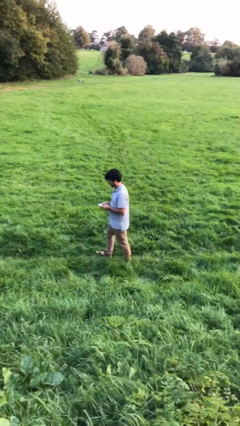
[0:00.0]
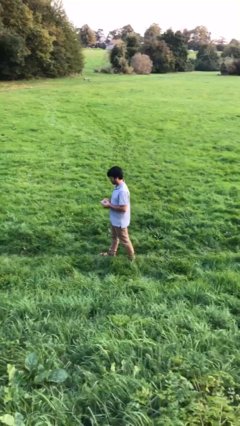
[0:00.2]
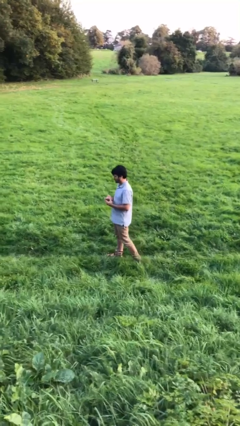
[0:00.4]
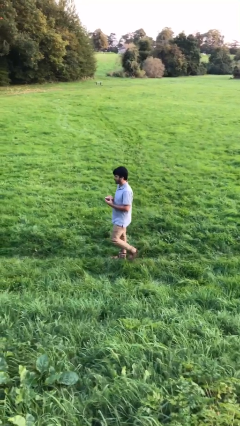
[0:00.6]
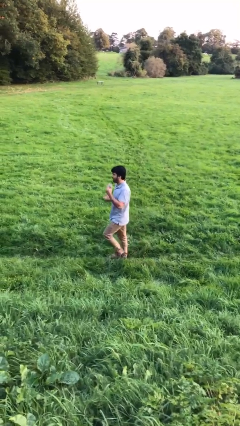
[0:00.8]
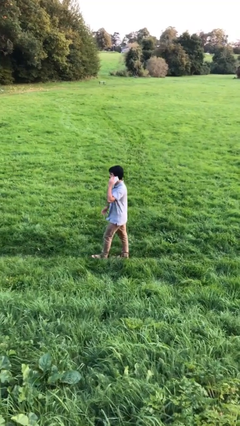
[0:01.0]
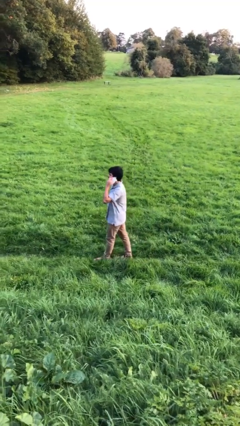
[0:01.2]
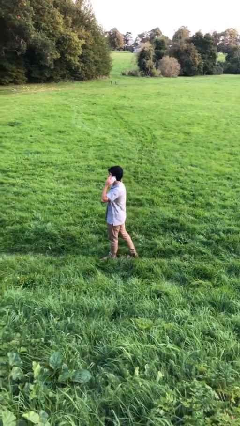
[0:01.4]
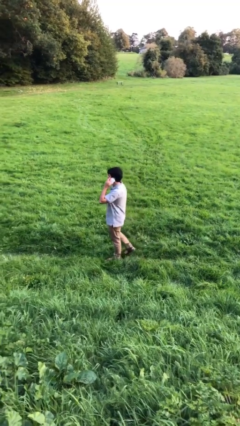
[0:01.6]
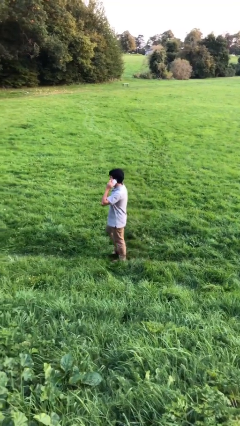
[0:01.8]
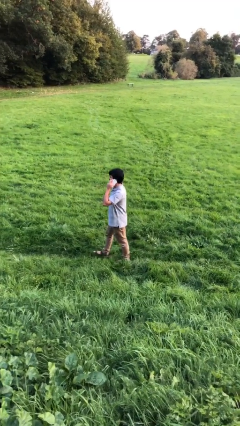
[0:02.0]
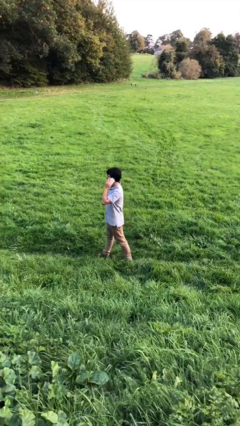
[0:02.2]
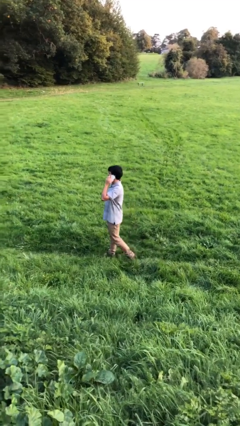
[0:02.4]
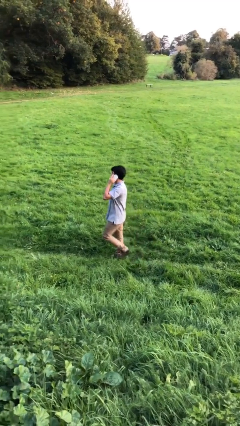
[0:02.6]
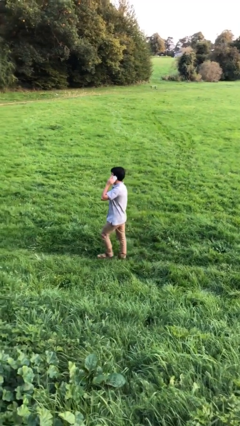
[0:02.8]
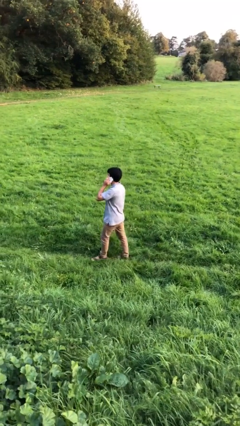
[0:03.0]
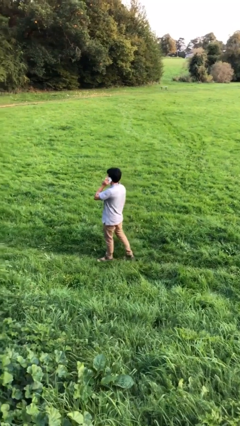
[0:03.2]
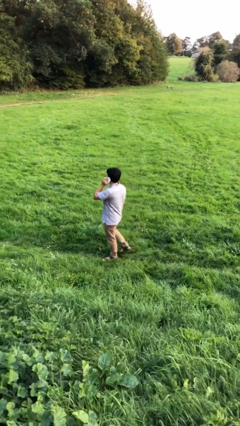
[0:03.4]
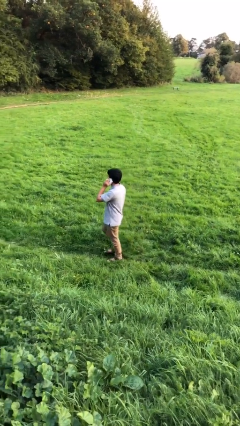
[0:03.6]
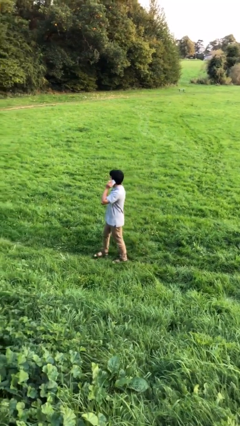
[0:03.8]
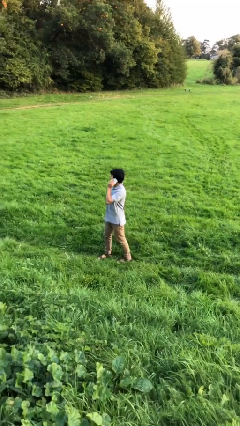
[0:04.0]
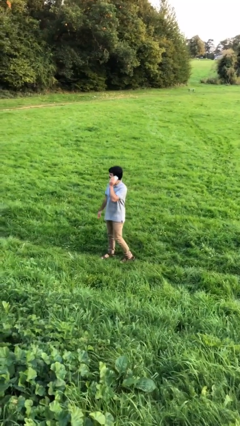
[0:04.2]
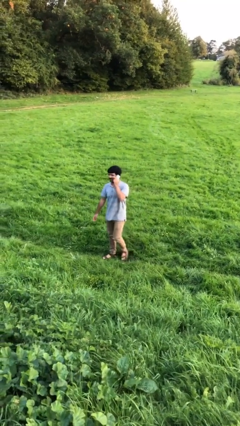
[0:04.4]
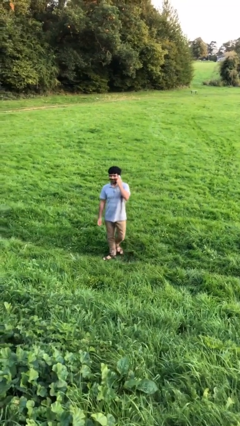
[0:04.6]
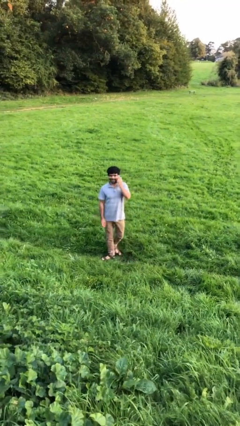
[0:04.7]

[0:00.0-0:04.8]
person talks on phone

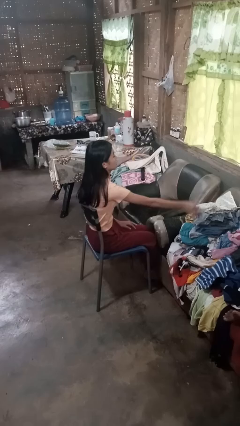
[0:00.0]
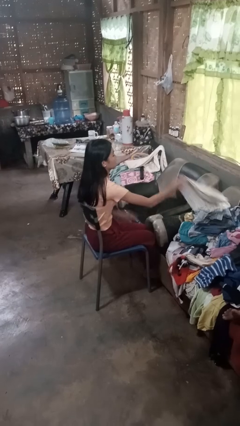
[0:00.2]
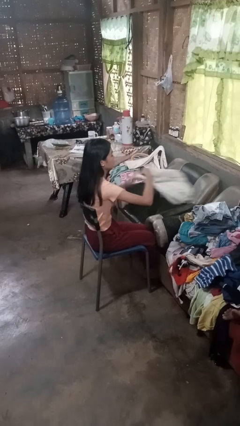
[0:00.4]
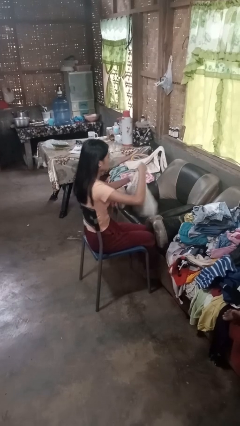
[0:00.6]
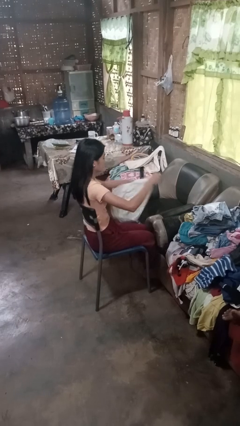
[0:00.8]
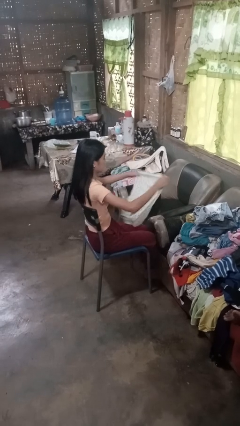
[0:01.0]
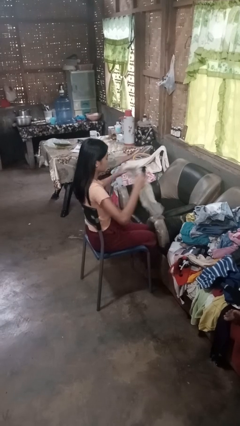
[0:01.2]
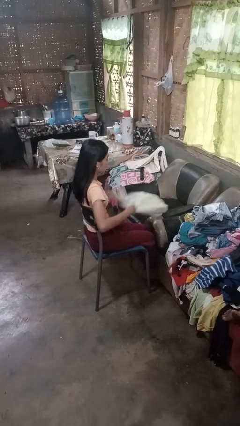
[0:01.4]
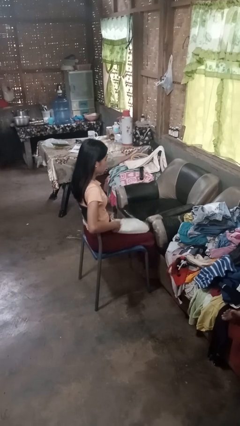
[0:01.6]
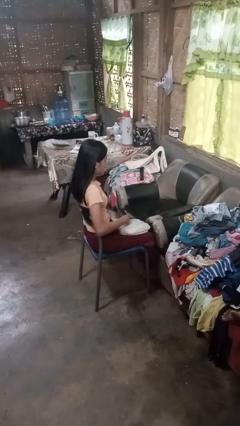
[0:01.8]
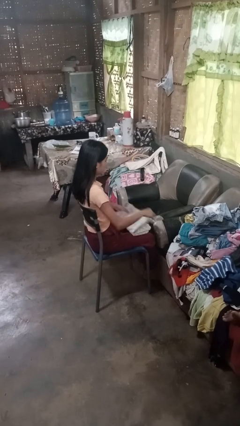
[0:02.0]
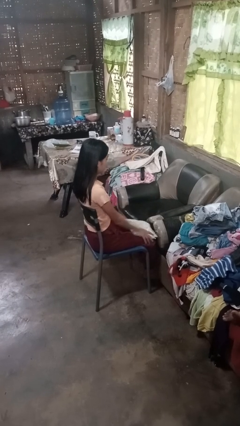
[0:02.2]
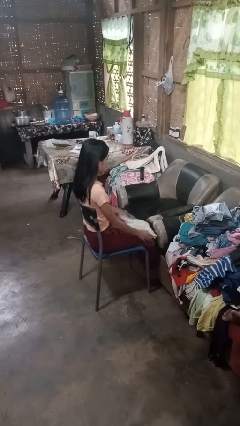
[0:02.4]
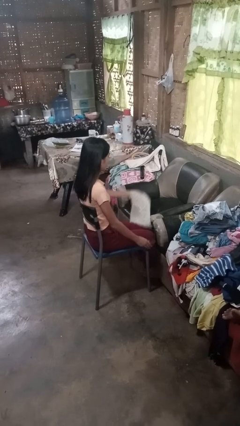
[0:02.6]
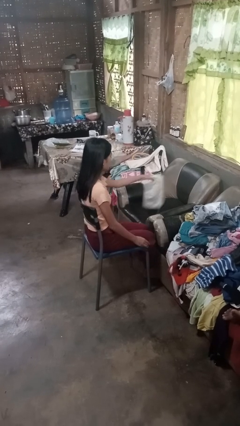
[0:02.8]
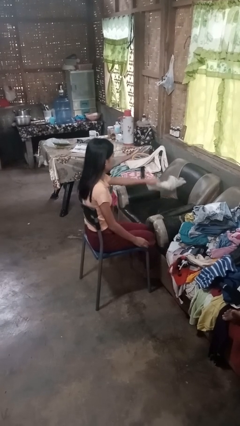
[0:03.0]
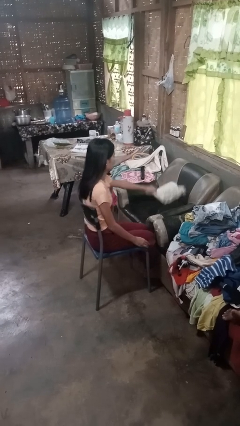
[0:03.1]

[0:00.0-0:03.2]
person folds pants

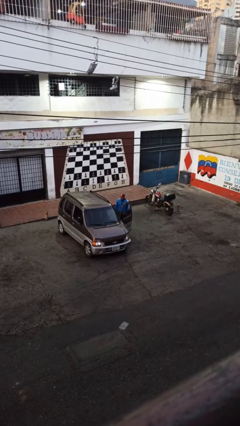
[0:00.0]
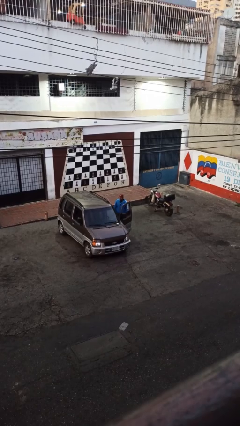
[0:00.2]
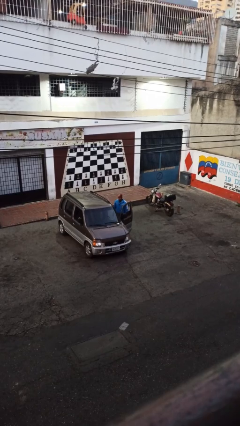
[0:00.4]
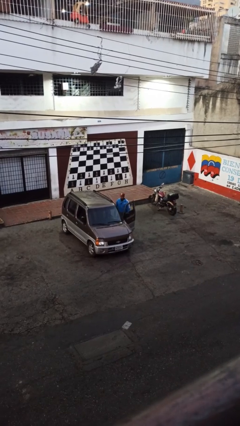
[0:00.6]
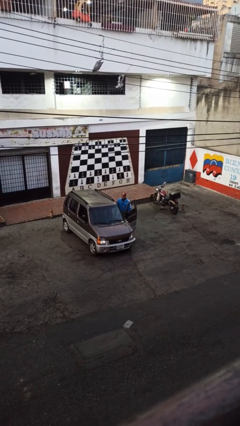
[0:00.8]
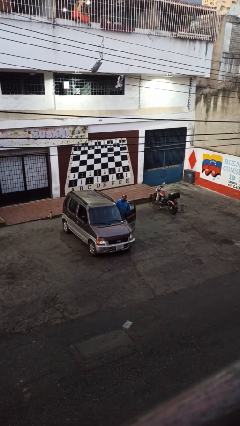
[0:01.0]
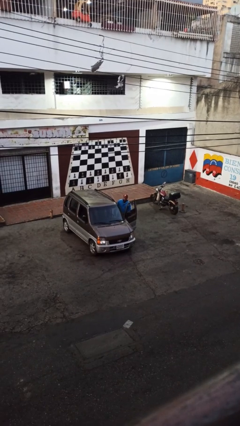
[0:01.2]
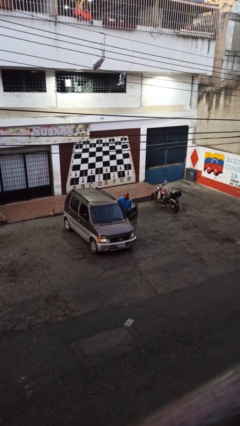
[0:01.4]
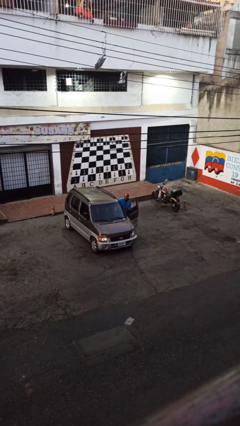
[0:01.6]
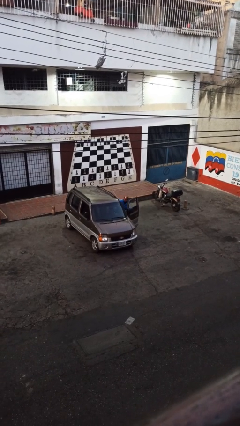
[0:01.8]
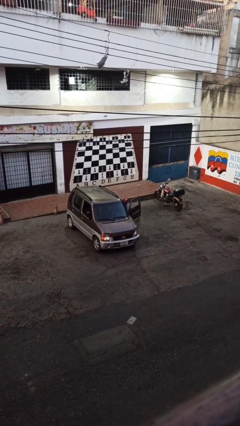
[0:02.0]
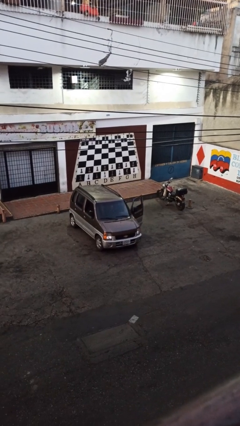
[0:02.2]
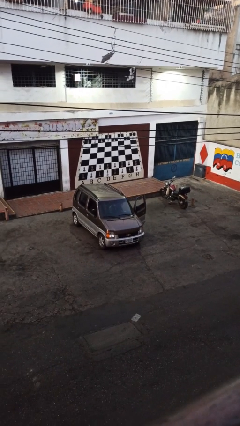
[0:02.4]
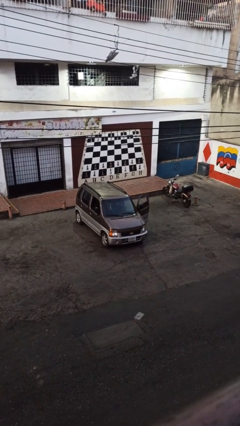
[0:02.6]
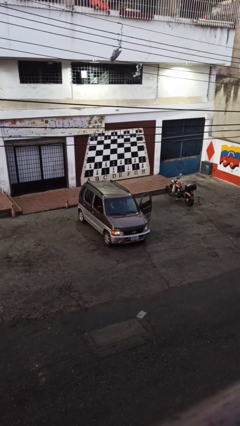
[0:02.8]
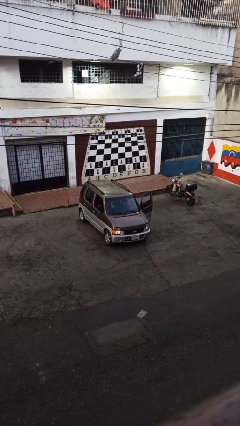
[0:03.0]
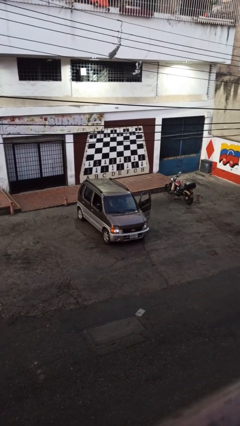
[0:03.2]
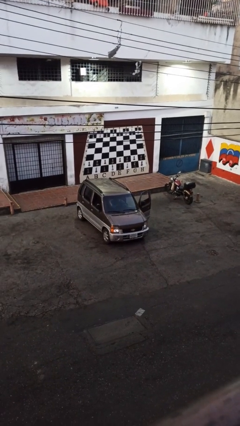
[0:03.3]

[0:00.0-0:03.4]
person enters car

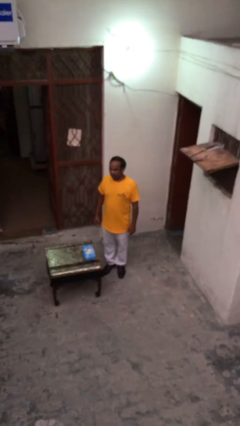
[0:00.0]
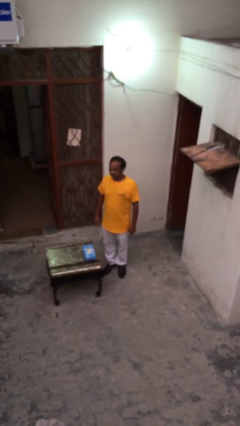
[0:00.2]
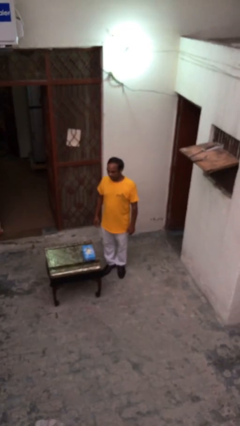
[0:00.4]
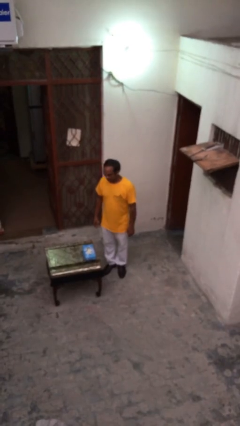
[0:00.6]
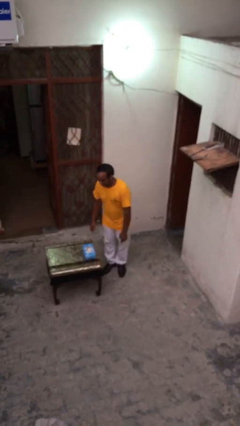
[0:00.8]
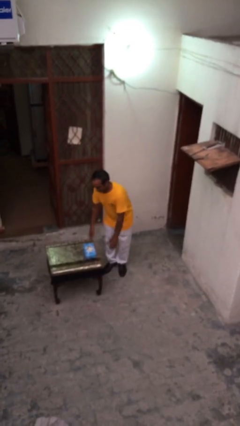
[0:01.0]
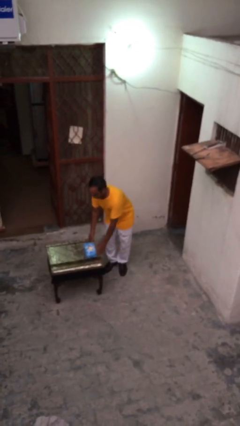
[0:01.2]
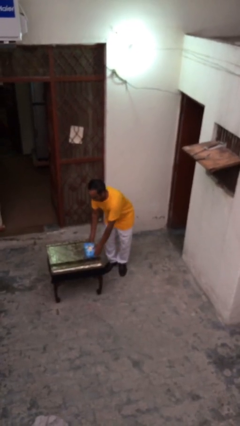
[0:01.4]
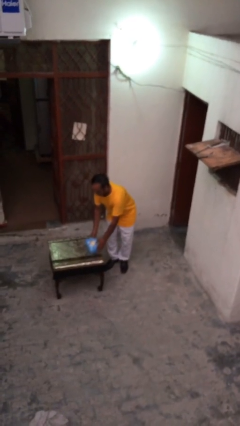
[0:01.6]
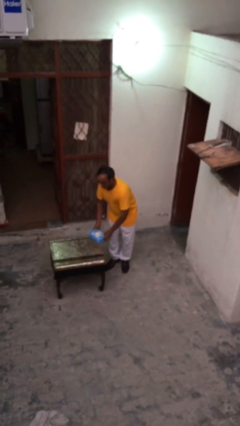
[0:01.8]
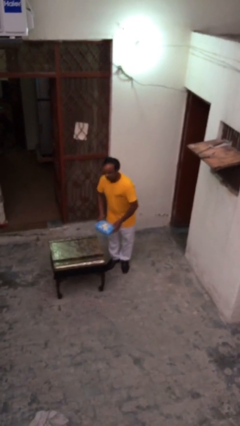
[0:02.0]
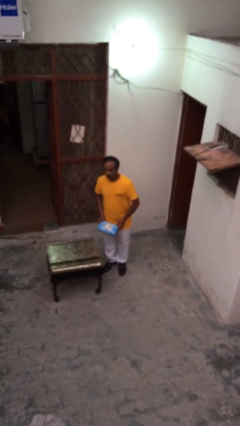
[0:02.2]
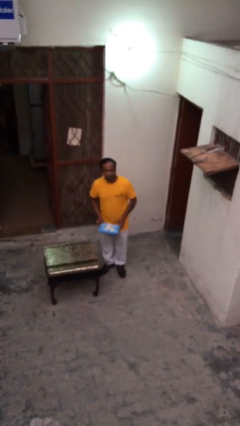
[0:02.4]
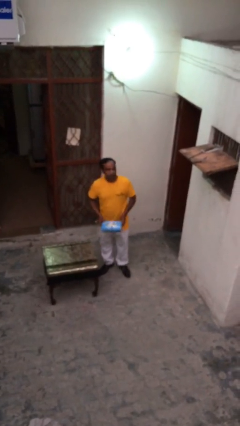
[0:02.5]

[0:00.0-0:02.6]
person picks up object from table

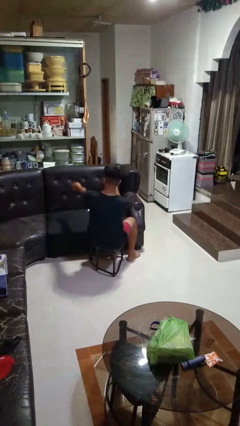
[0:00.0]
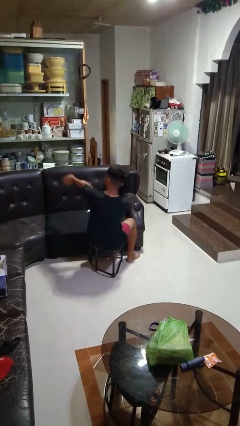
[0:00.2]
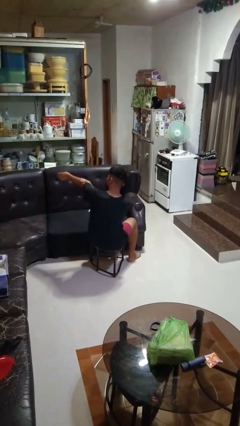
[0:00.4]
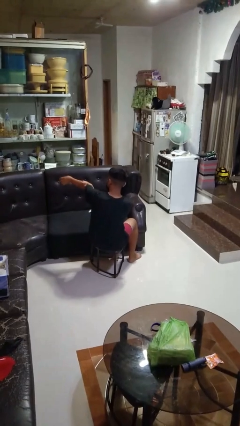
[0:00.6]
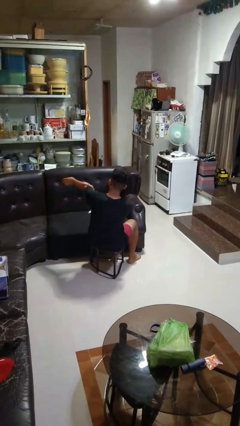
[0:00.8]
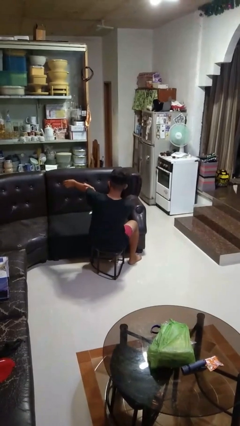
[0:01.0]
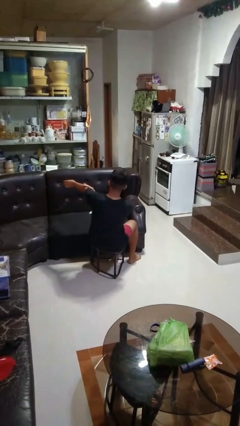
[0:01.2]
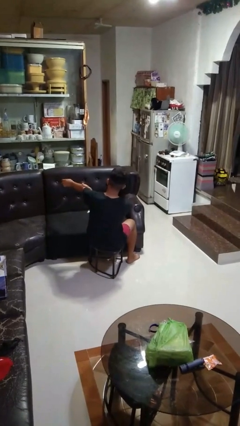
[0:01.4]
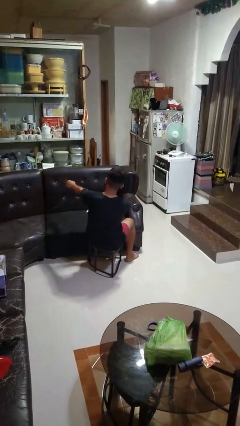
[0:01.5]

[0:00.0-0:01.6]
person swats bug

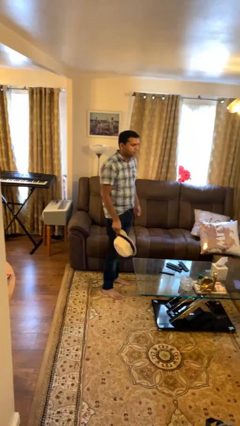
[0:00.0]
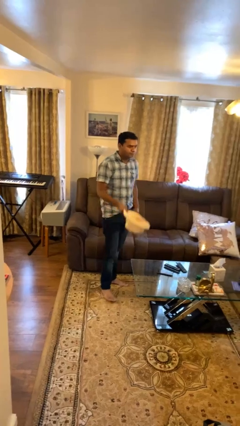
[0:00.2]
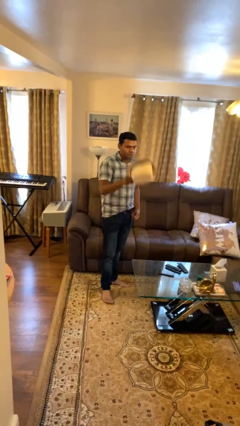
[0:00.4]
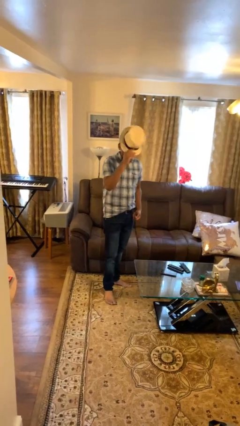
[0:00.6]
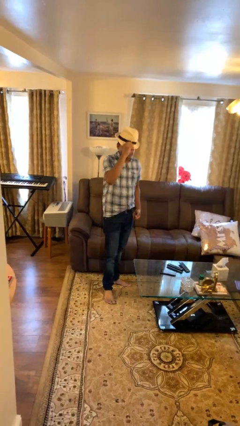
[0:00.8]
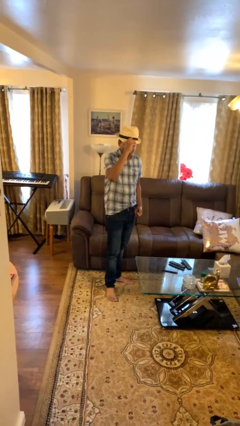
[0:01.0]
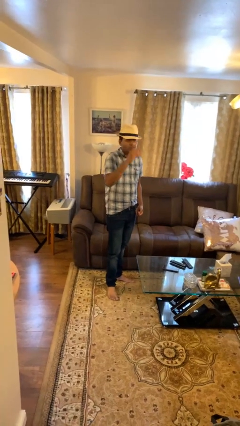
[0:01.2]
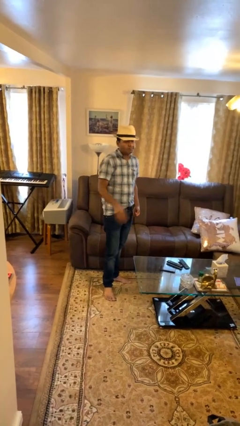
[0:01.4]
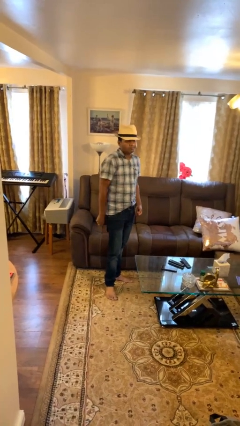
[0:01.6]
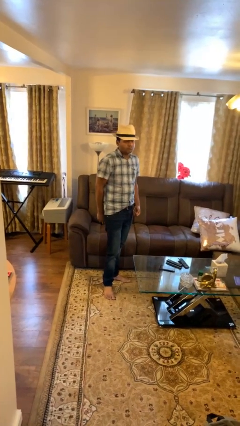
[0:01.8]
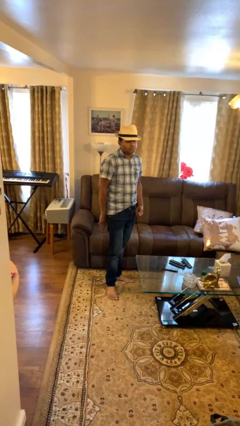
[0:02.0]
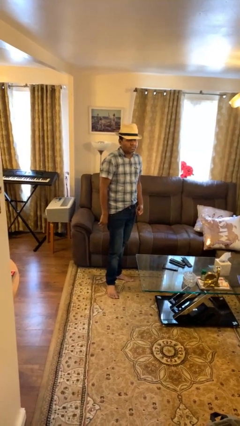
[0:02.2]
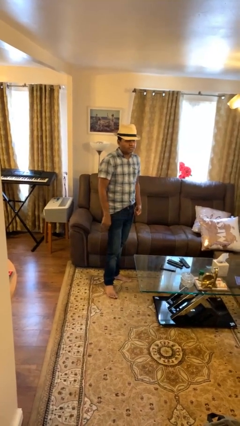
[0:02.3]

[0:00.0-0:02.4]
person puts on hat
